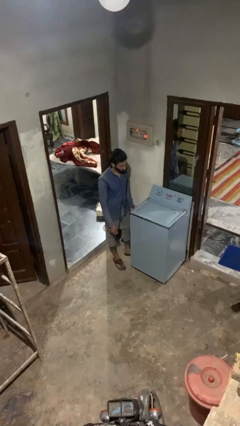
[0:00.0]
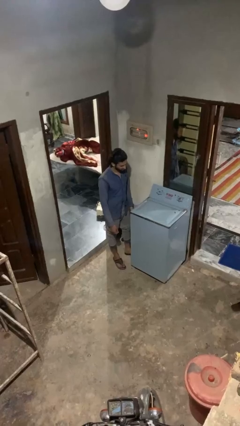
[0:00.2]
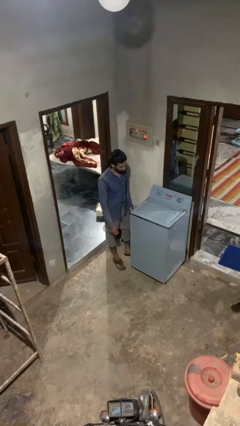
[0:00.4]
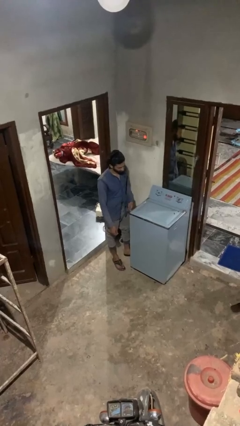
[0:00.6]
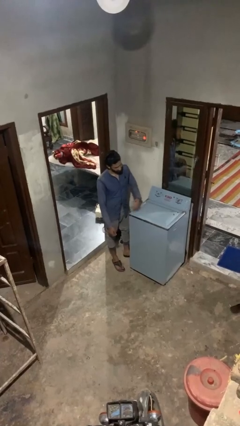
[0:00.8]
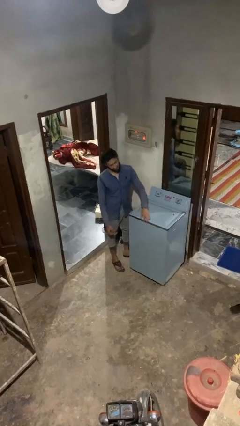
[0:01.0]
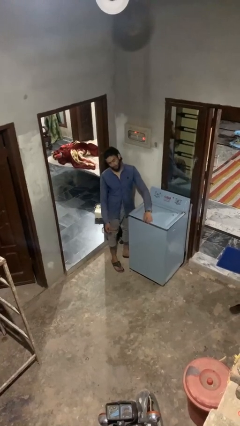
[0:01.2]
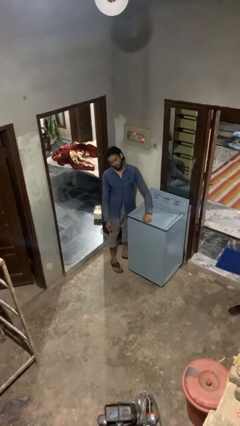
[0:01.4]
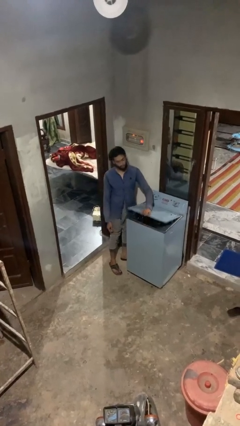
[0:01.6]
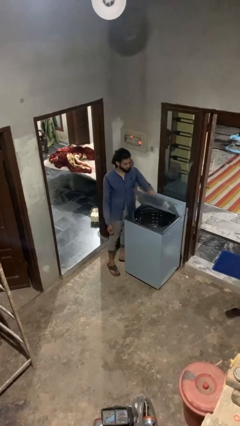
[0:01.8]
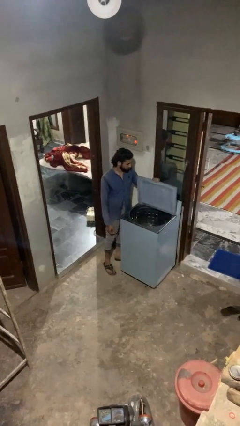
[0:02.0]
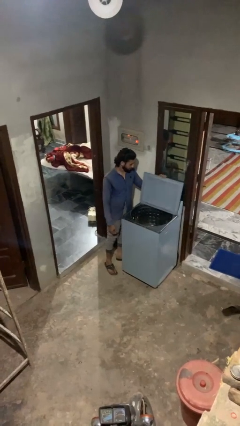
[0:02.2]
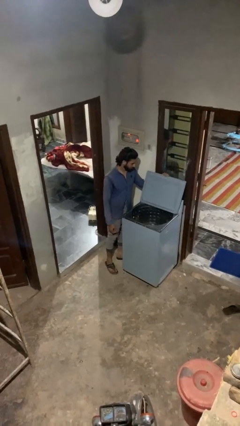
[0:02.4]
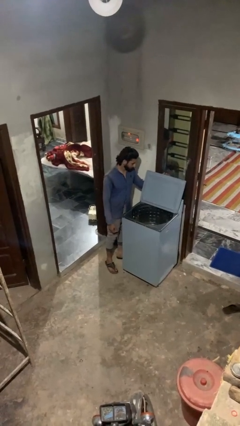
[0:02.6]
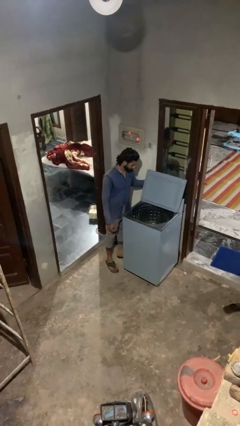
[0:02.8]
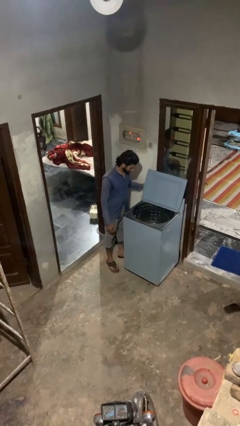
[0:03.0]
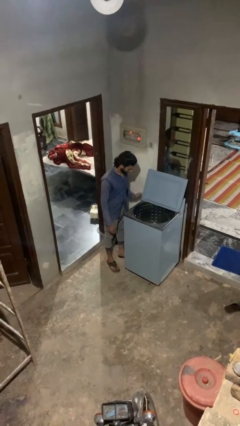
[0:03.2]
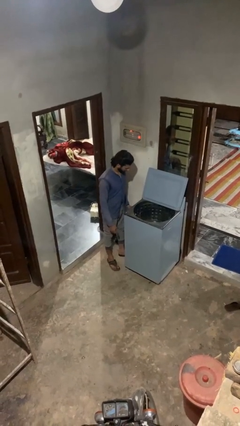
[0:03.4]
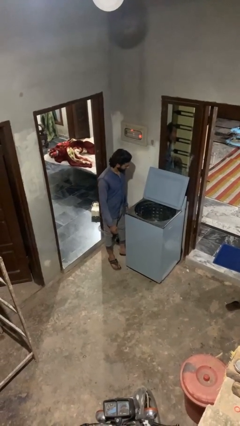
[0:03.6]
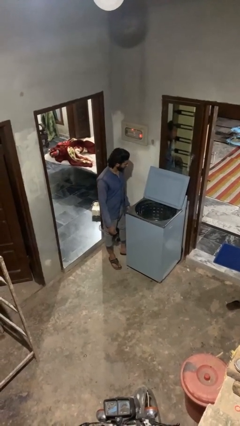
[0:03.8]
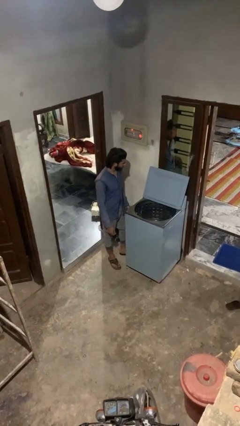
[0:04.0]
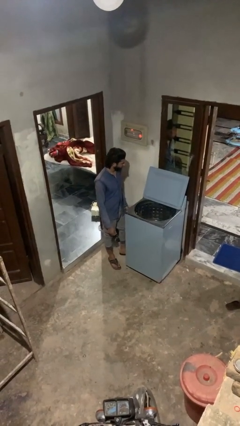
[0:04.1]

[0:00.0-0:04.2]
person opens clothes washer

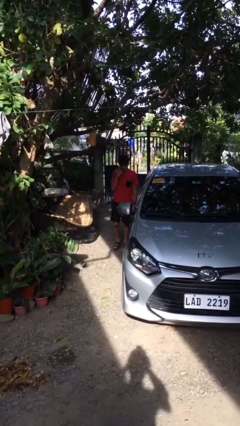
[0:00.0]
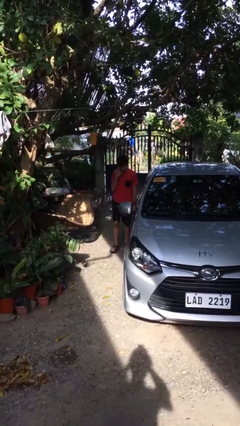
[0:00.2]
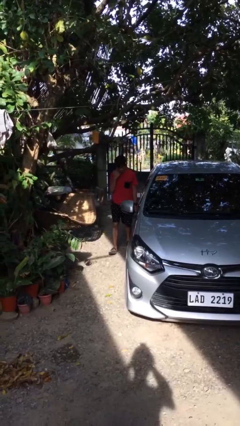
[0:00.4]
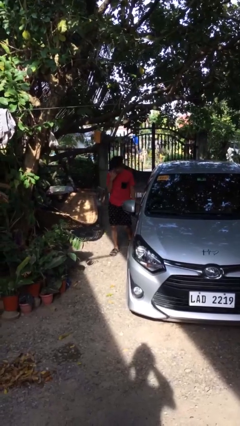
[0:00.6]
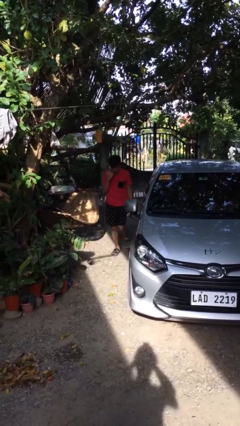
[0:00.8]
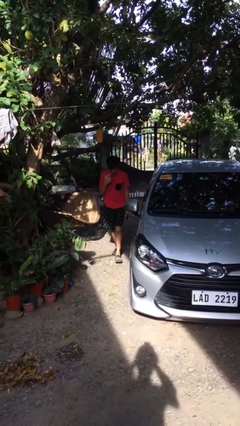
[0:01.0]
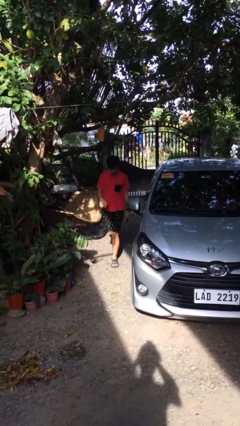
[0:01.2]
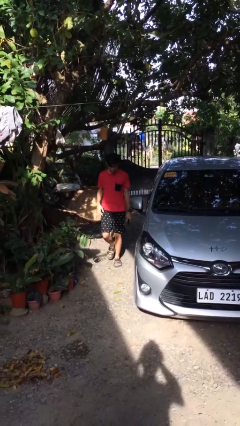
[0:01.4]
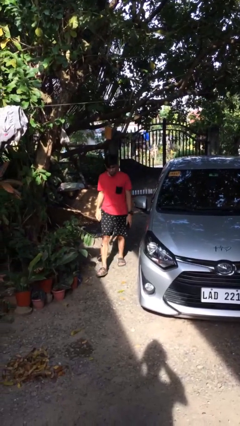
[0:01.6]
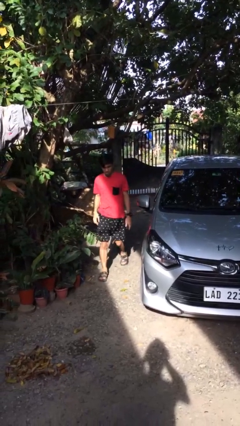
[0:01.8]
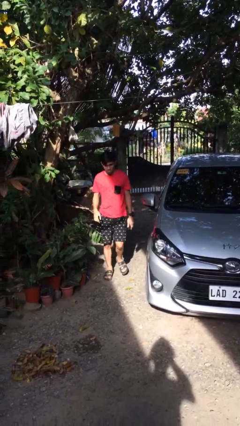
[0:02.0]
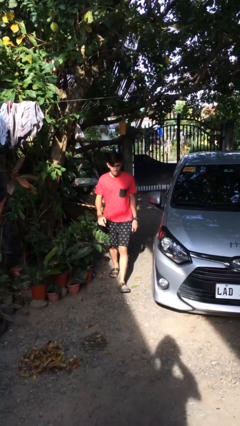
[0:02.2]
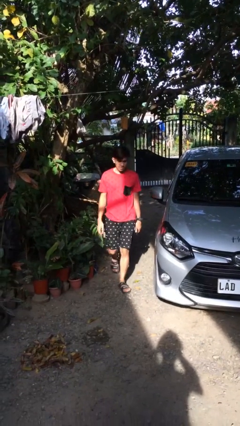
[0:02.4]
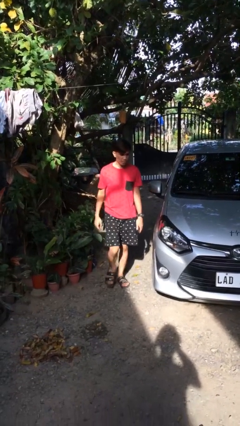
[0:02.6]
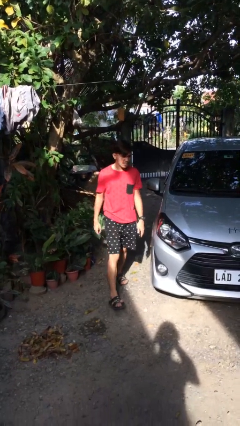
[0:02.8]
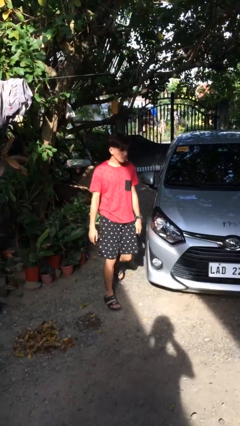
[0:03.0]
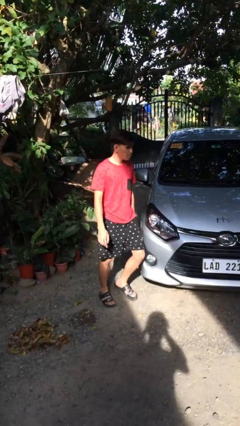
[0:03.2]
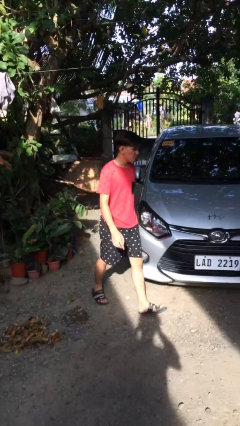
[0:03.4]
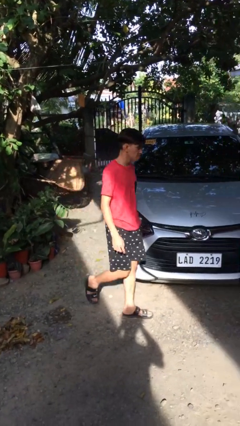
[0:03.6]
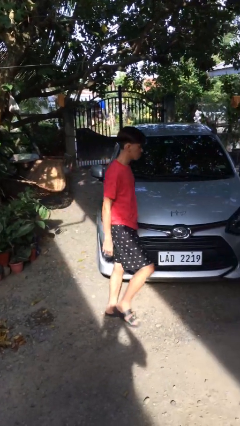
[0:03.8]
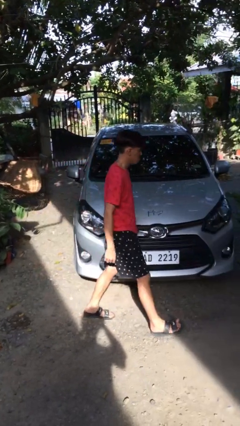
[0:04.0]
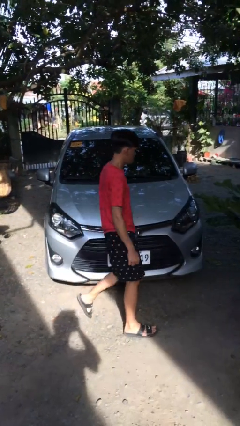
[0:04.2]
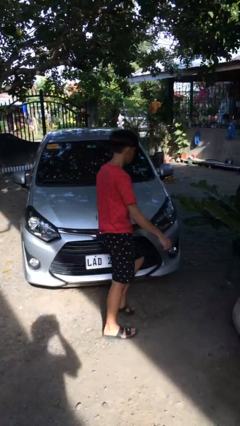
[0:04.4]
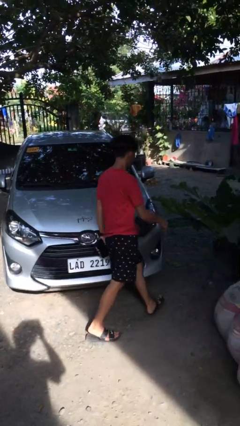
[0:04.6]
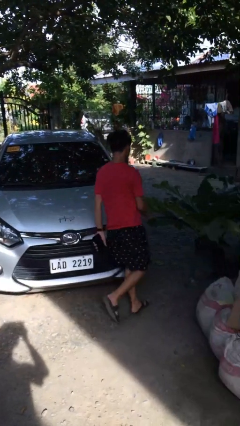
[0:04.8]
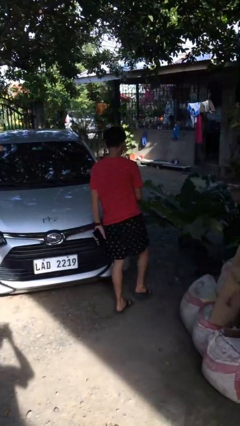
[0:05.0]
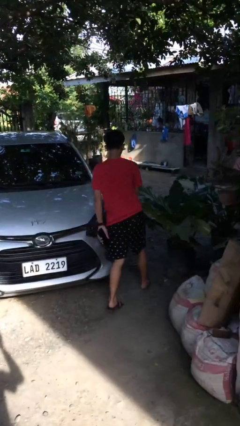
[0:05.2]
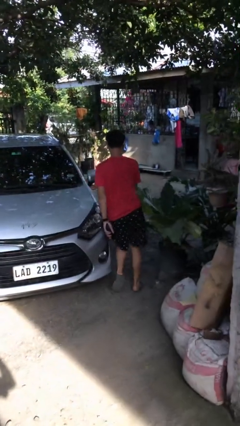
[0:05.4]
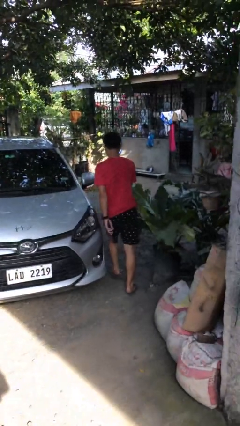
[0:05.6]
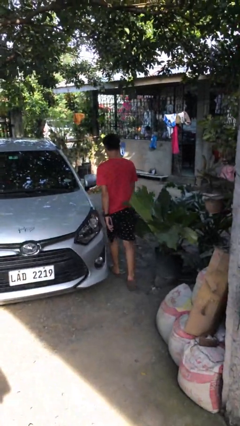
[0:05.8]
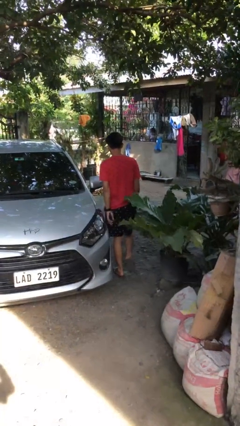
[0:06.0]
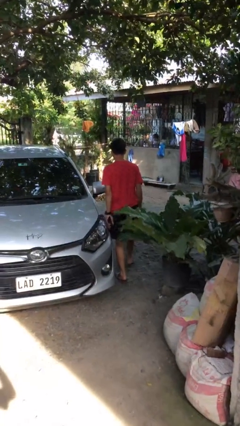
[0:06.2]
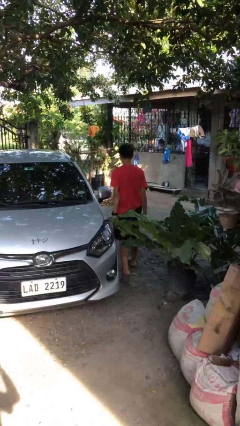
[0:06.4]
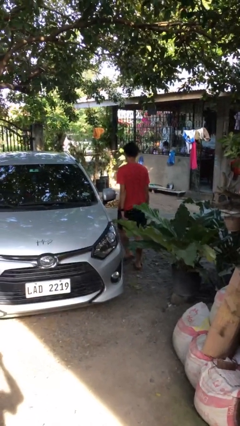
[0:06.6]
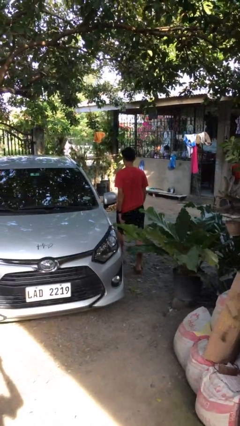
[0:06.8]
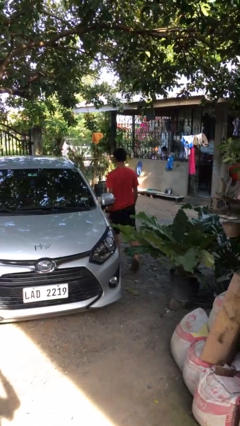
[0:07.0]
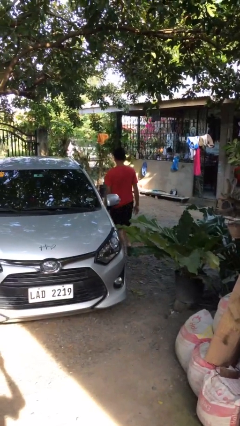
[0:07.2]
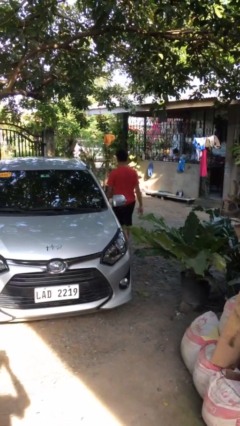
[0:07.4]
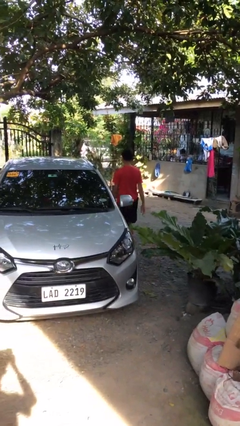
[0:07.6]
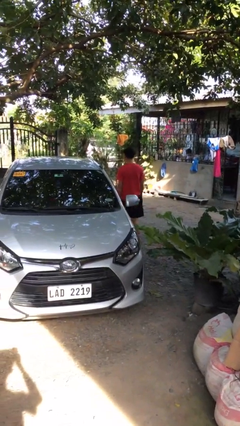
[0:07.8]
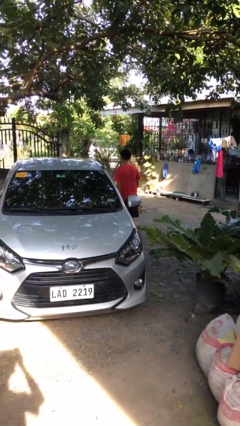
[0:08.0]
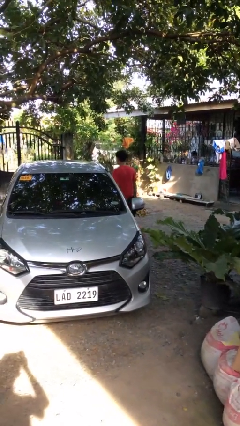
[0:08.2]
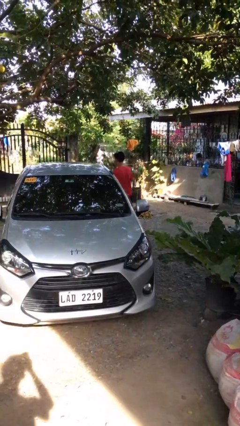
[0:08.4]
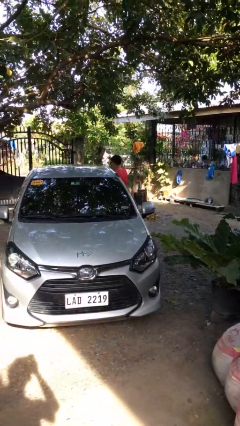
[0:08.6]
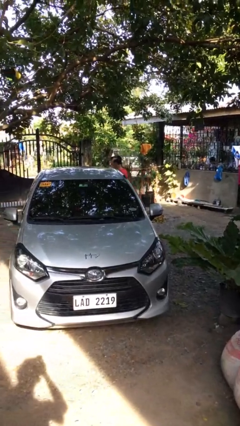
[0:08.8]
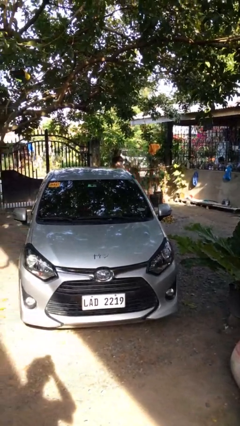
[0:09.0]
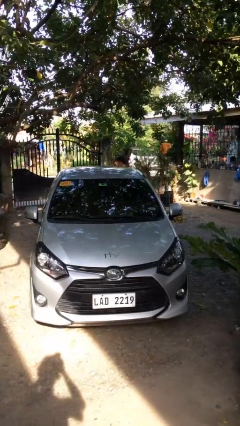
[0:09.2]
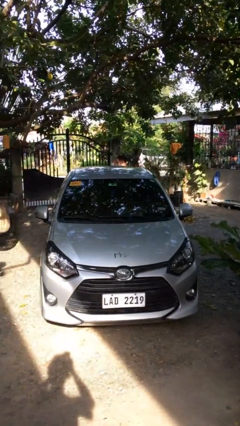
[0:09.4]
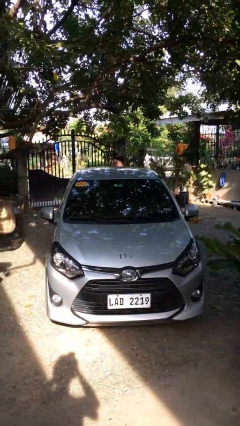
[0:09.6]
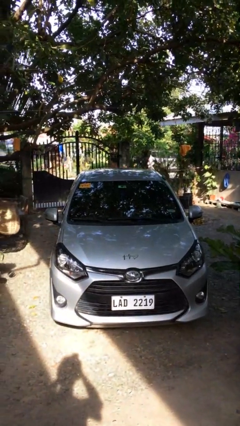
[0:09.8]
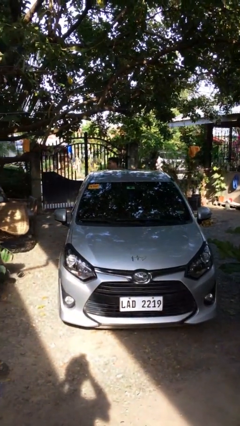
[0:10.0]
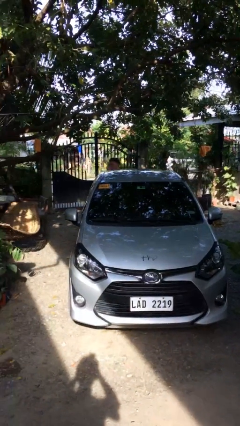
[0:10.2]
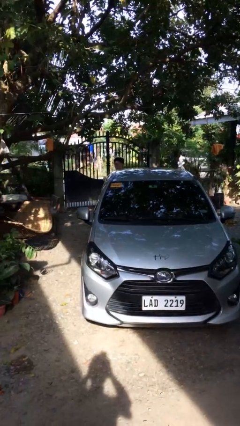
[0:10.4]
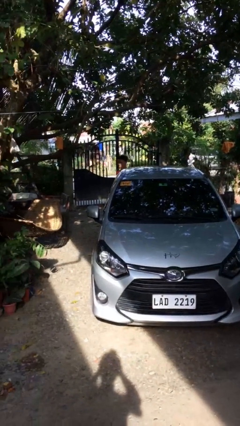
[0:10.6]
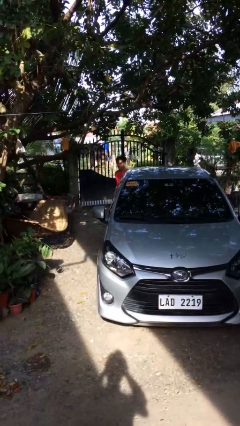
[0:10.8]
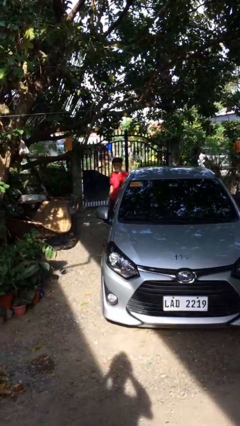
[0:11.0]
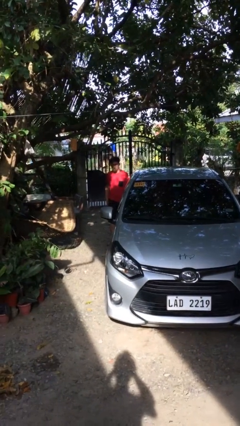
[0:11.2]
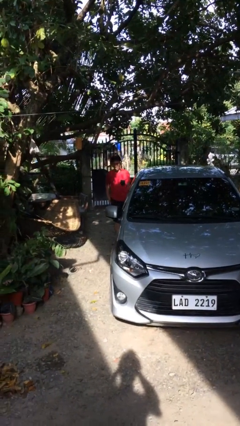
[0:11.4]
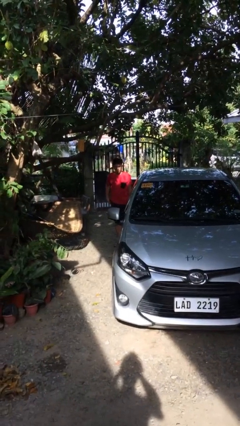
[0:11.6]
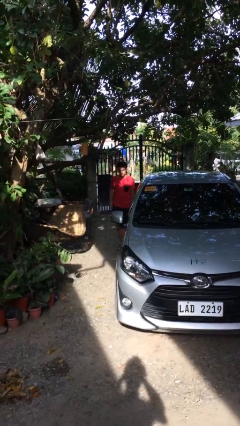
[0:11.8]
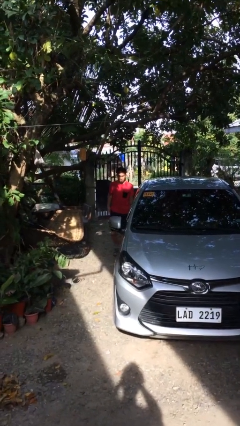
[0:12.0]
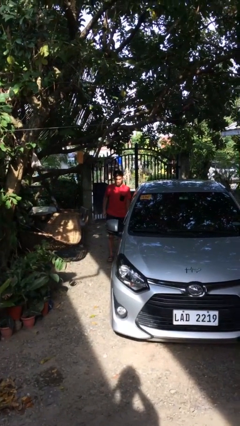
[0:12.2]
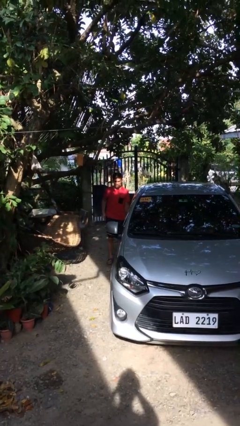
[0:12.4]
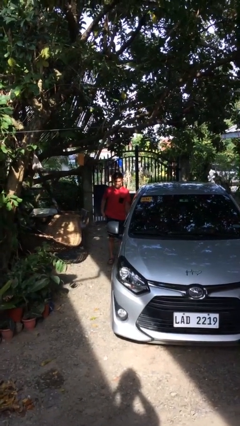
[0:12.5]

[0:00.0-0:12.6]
person walks around car

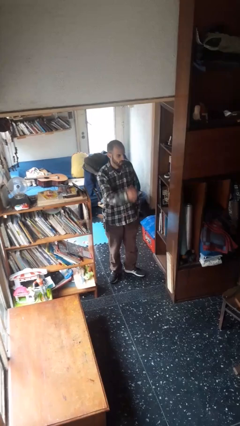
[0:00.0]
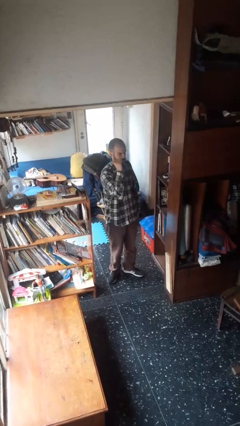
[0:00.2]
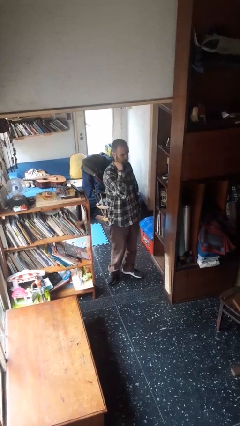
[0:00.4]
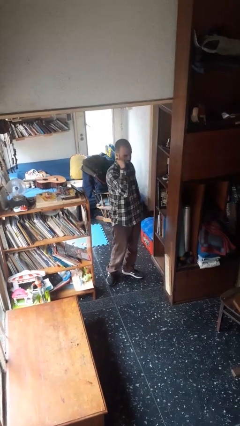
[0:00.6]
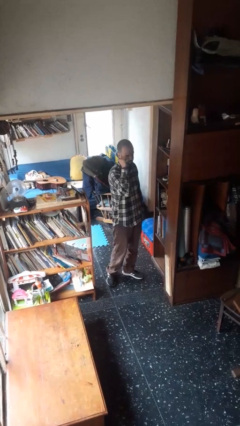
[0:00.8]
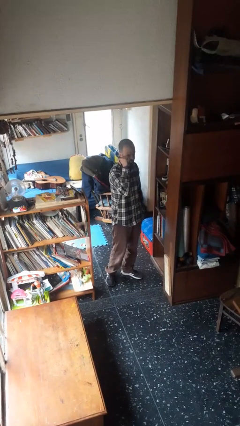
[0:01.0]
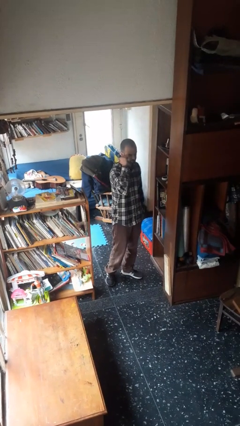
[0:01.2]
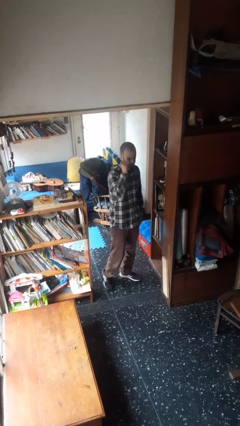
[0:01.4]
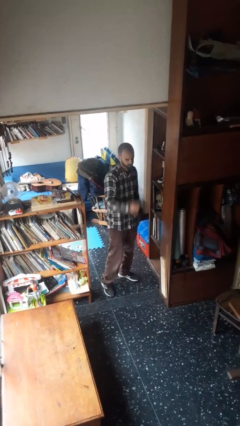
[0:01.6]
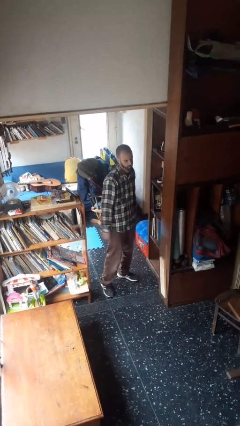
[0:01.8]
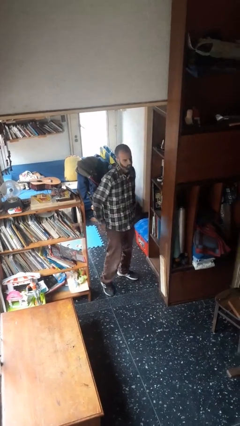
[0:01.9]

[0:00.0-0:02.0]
person gestures behind me
